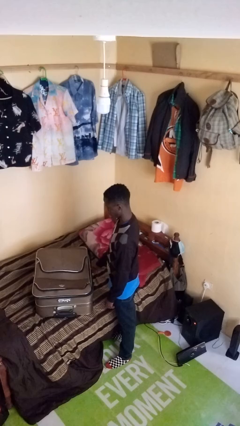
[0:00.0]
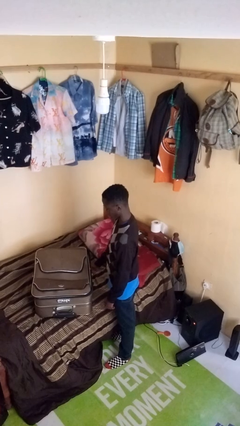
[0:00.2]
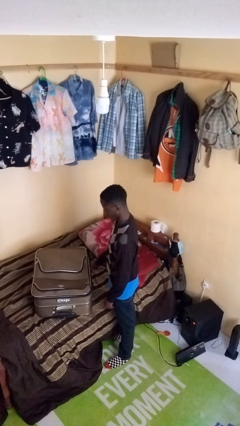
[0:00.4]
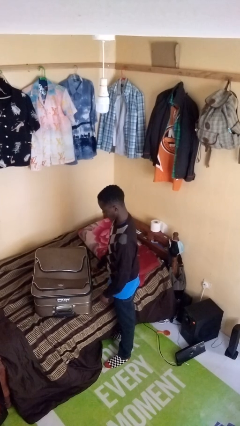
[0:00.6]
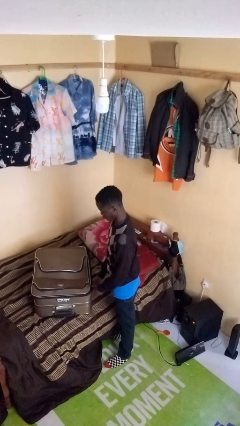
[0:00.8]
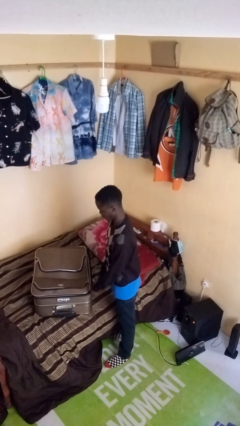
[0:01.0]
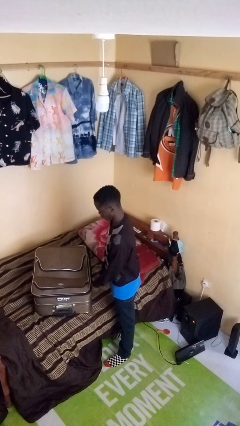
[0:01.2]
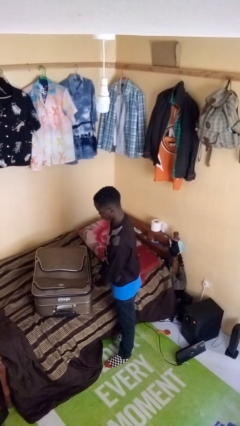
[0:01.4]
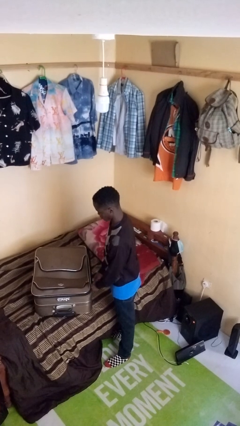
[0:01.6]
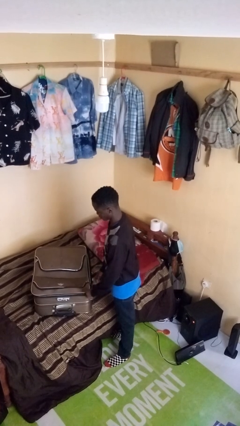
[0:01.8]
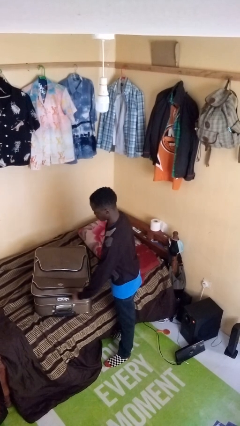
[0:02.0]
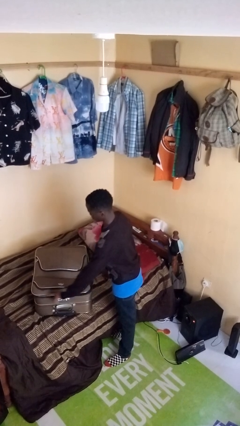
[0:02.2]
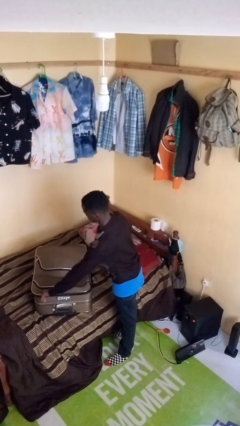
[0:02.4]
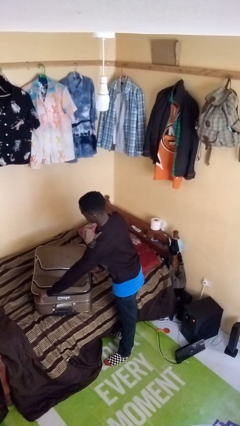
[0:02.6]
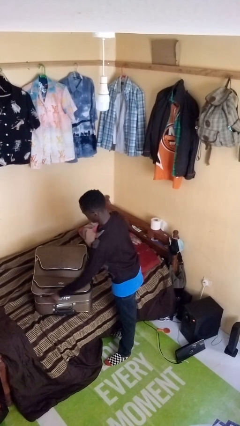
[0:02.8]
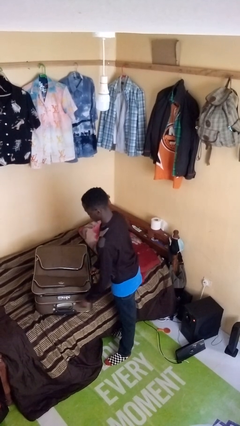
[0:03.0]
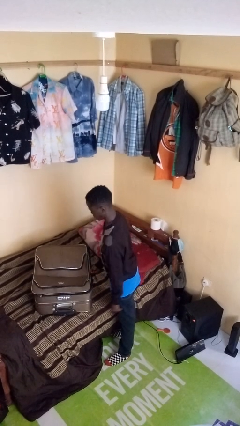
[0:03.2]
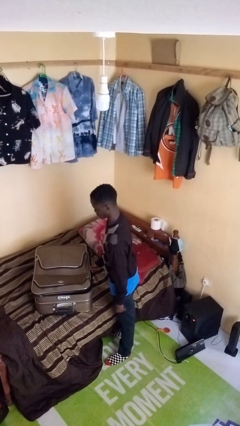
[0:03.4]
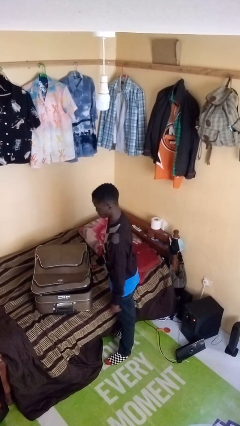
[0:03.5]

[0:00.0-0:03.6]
person opens suitcase

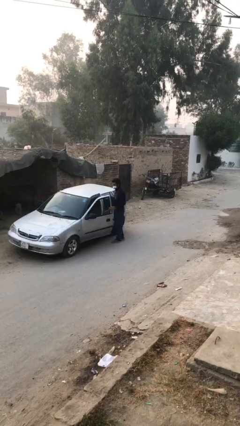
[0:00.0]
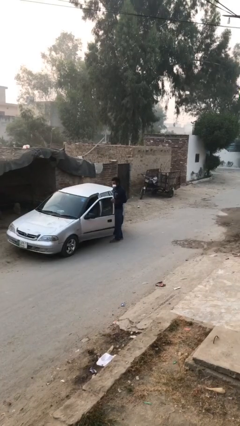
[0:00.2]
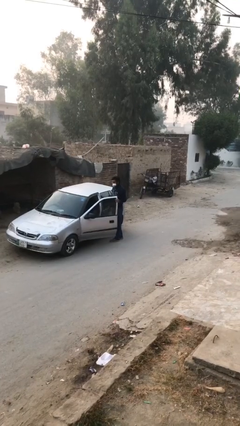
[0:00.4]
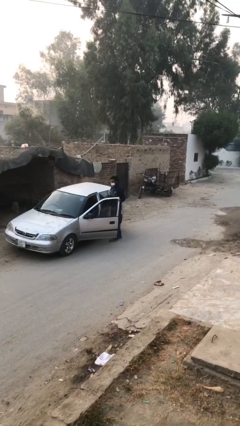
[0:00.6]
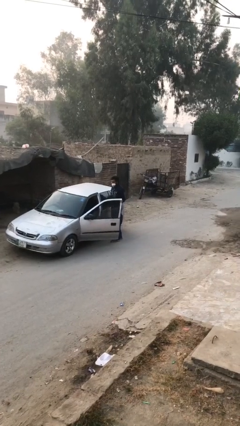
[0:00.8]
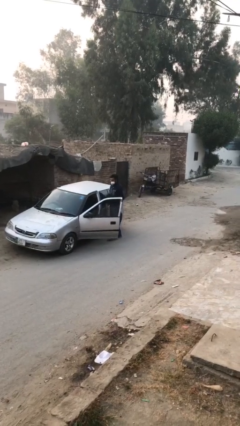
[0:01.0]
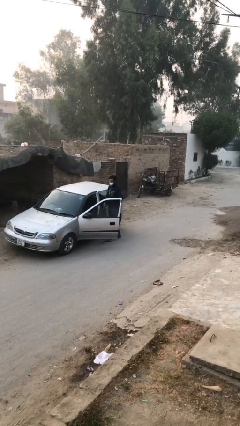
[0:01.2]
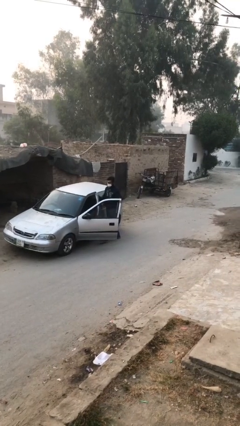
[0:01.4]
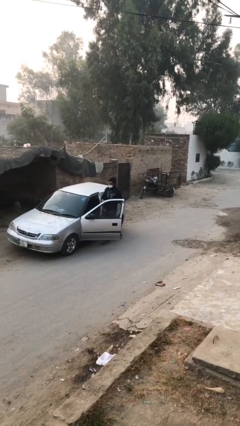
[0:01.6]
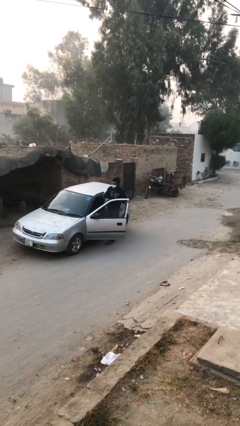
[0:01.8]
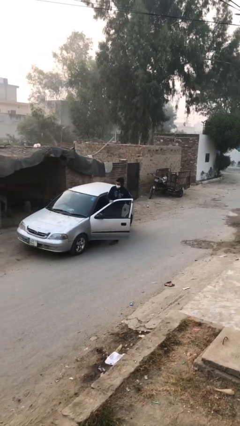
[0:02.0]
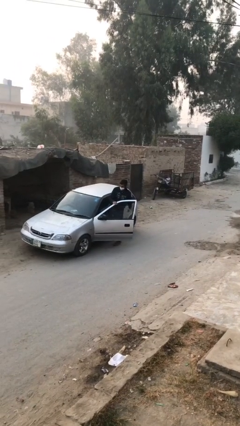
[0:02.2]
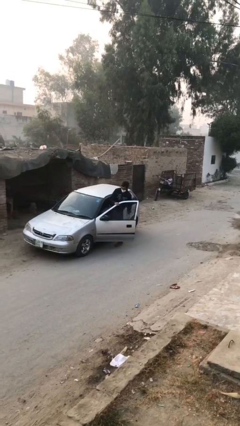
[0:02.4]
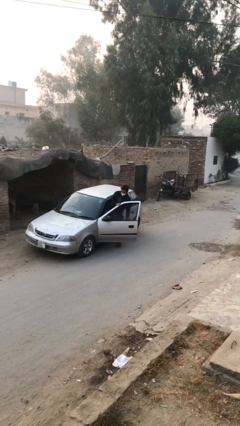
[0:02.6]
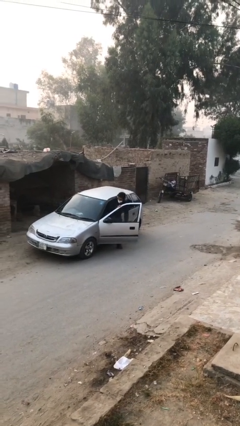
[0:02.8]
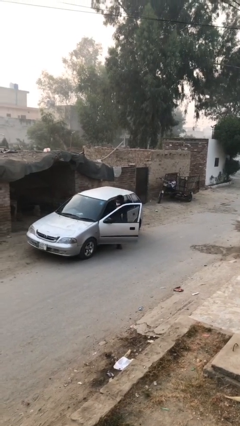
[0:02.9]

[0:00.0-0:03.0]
person enters car

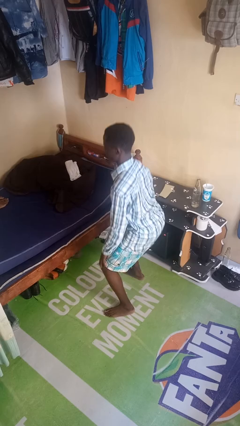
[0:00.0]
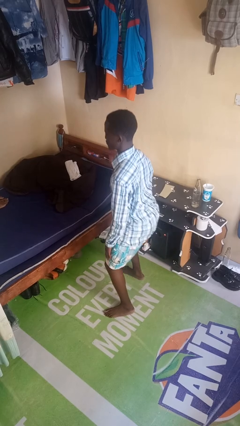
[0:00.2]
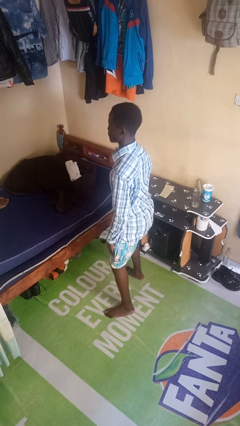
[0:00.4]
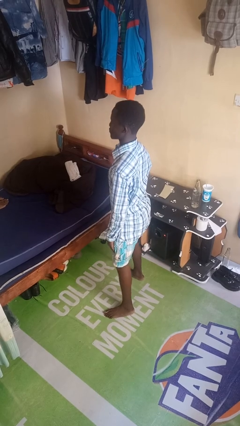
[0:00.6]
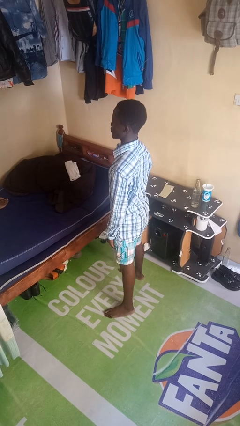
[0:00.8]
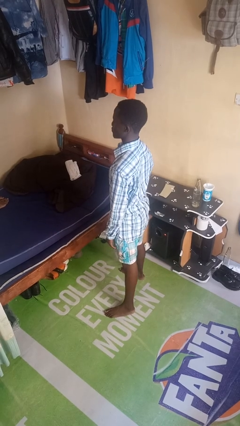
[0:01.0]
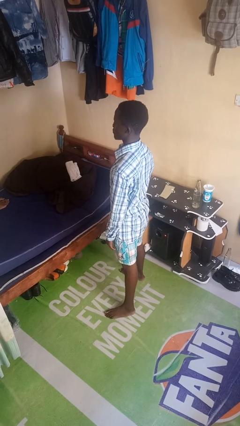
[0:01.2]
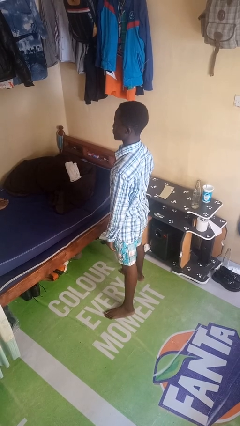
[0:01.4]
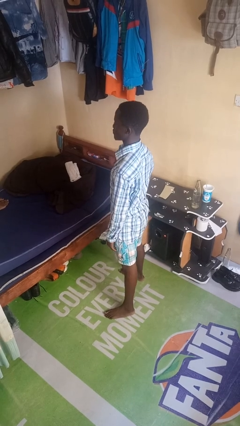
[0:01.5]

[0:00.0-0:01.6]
person stands up

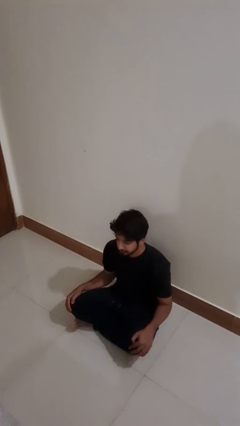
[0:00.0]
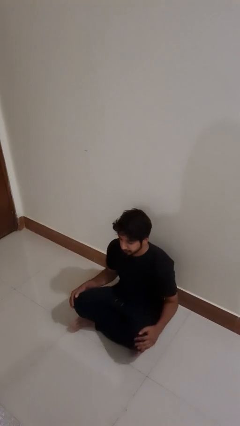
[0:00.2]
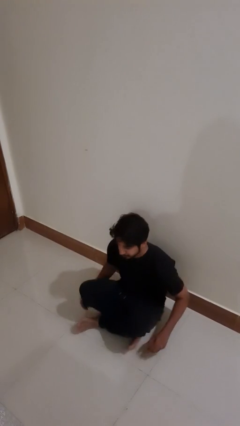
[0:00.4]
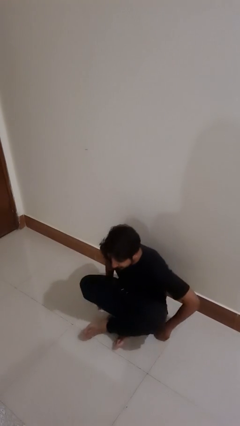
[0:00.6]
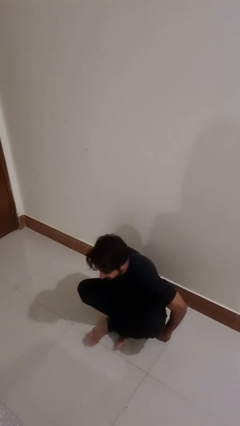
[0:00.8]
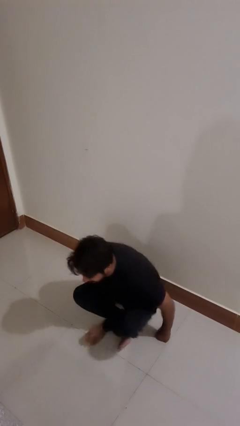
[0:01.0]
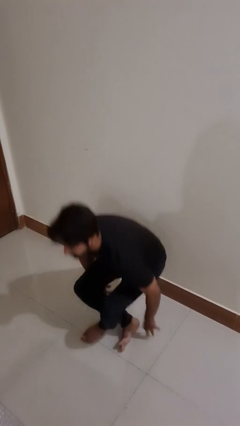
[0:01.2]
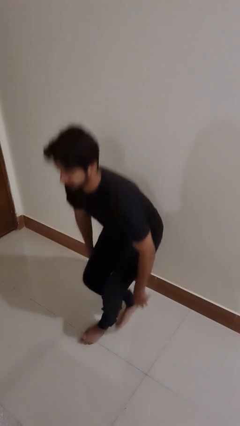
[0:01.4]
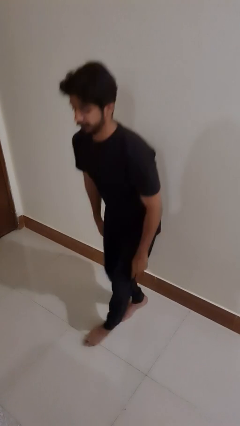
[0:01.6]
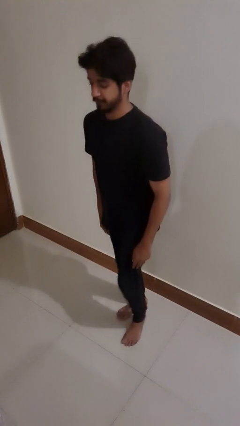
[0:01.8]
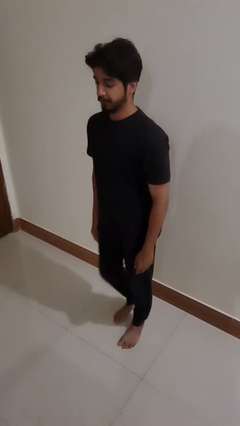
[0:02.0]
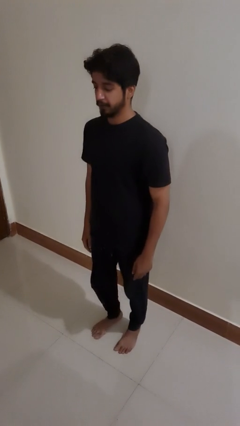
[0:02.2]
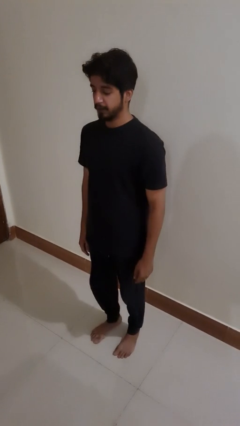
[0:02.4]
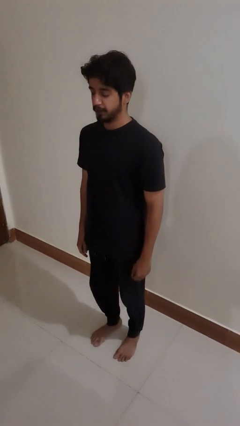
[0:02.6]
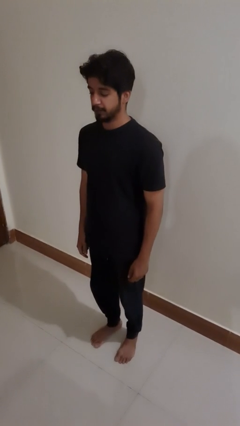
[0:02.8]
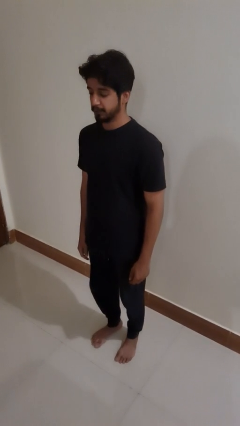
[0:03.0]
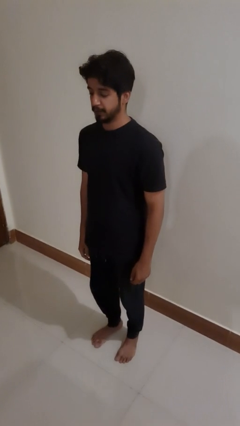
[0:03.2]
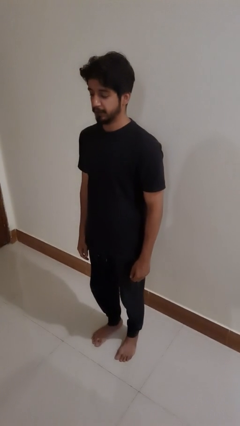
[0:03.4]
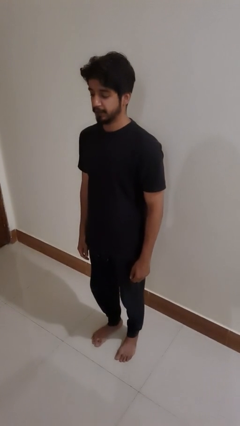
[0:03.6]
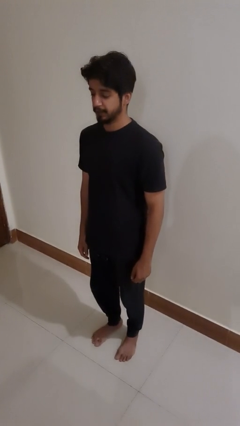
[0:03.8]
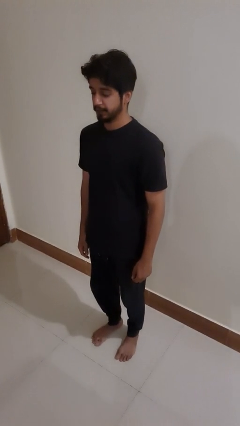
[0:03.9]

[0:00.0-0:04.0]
person stands up from floor

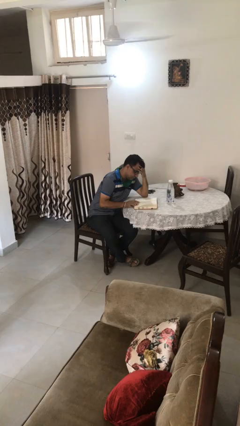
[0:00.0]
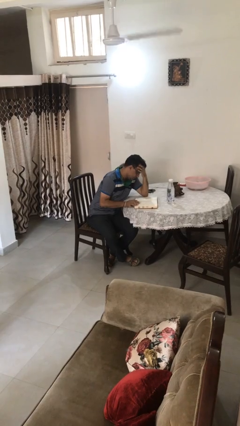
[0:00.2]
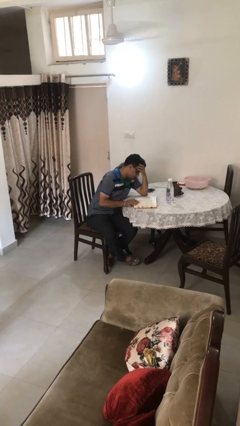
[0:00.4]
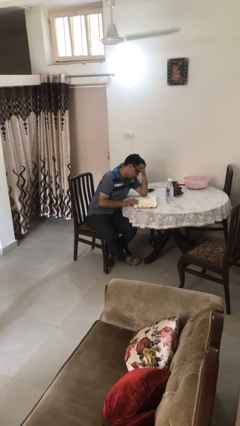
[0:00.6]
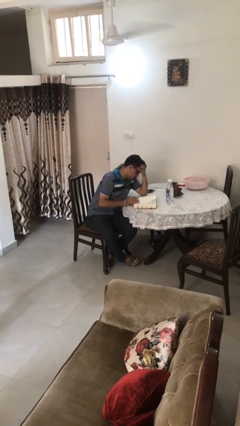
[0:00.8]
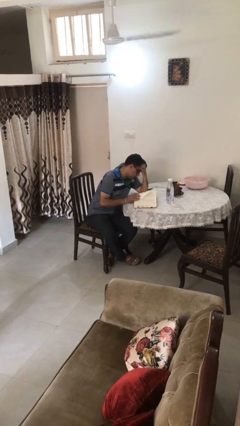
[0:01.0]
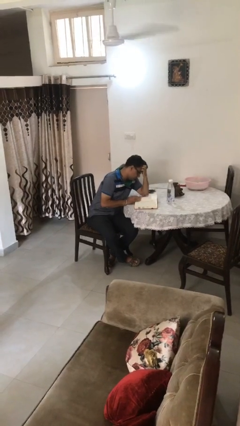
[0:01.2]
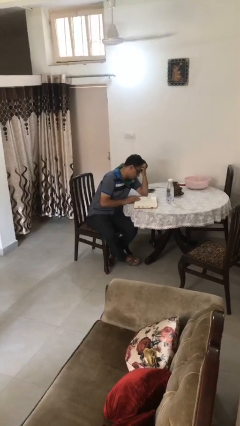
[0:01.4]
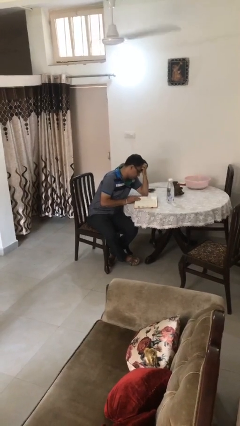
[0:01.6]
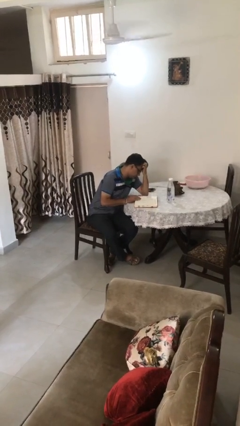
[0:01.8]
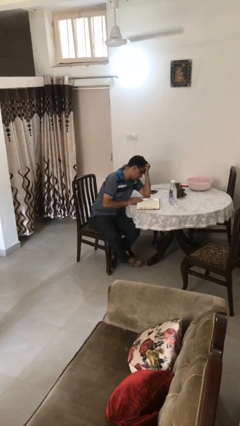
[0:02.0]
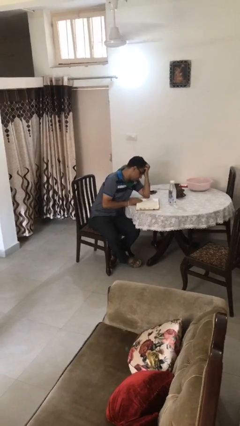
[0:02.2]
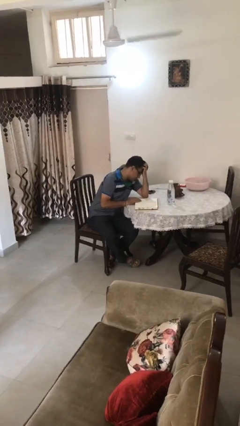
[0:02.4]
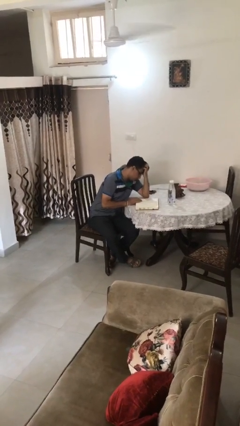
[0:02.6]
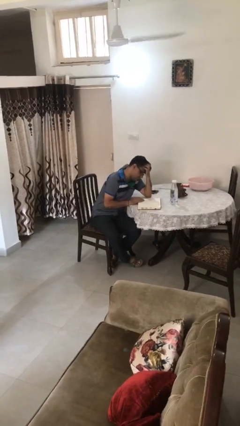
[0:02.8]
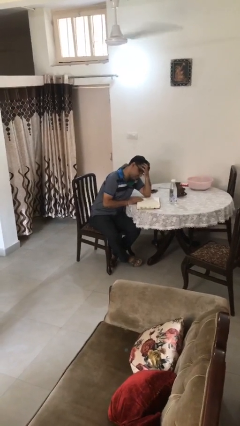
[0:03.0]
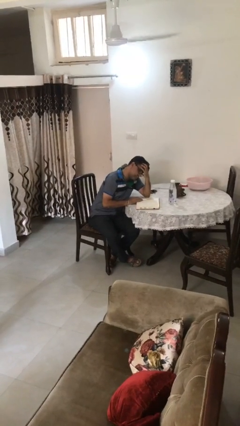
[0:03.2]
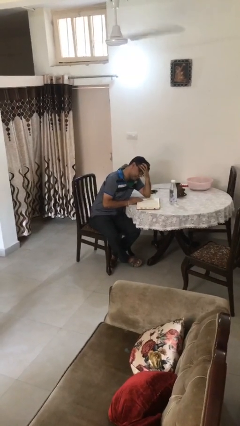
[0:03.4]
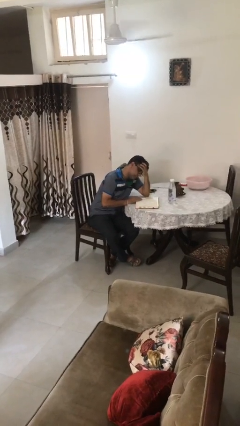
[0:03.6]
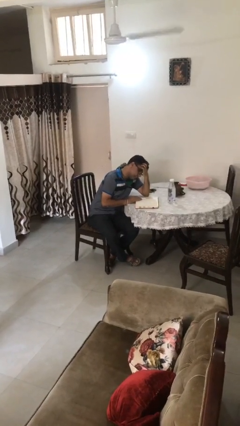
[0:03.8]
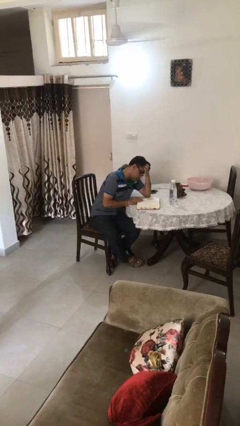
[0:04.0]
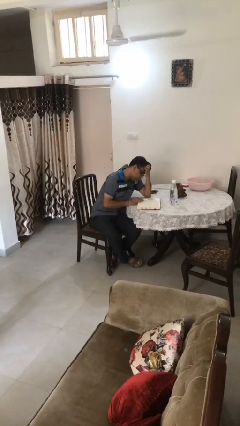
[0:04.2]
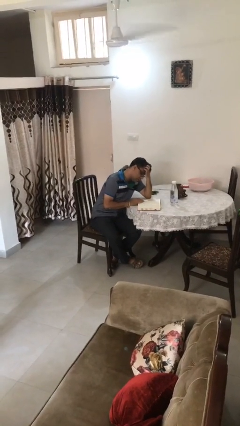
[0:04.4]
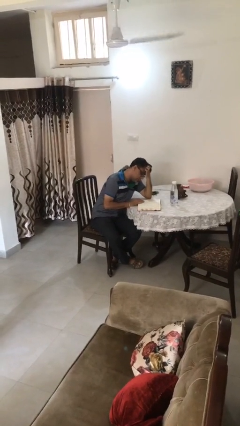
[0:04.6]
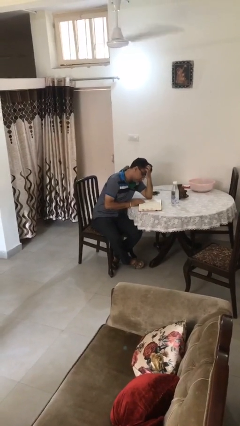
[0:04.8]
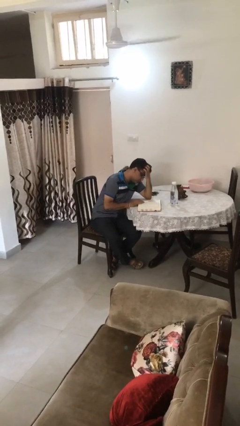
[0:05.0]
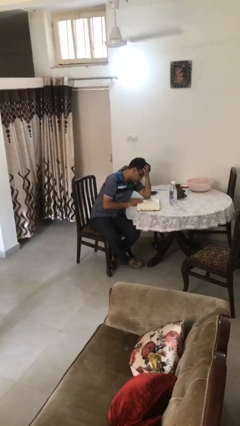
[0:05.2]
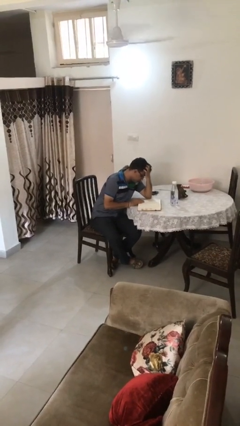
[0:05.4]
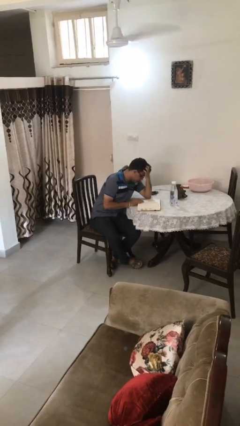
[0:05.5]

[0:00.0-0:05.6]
person reads document
